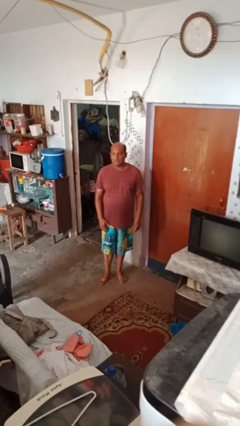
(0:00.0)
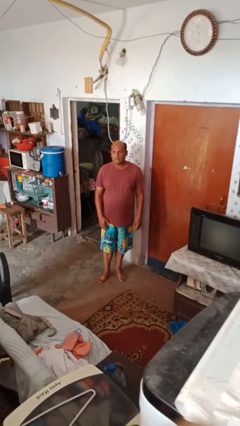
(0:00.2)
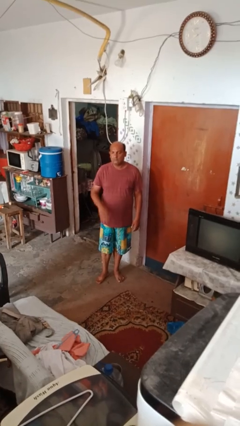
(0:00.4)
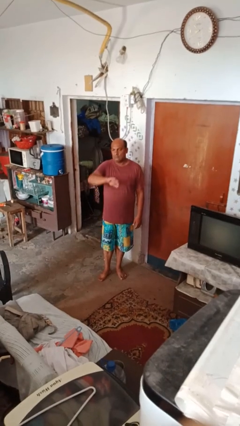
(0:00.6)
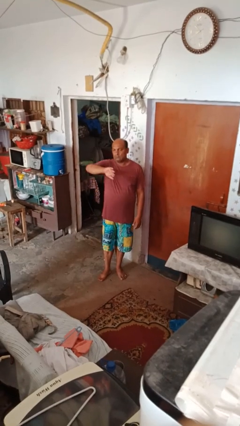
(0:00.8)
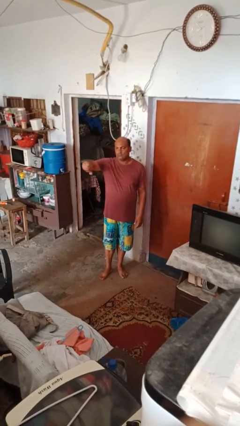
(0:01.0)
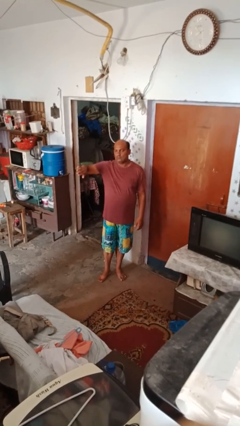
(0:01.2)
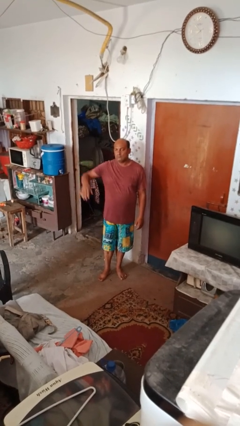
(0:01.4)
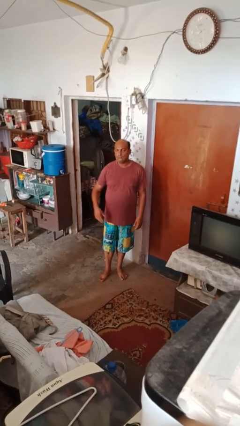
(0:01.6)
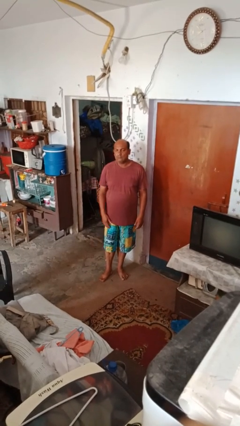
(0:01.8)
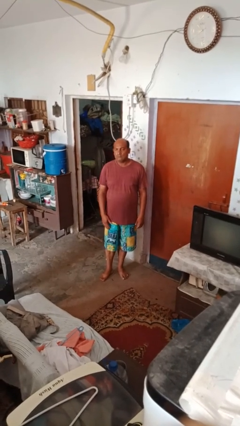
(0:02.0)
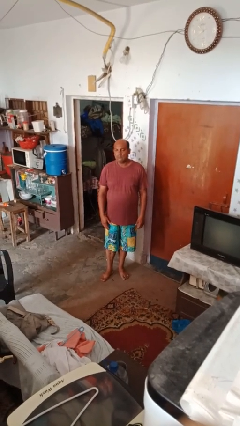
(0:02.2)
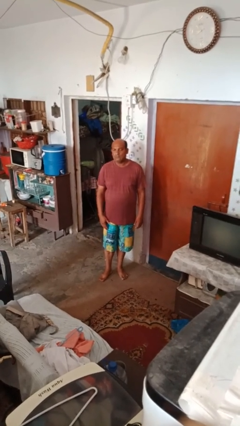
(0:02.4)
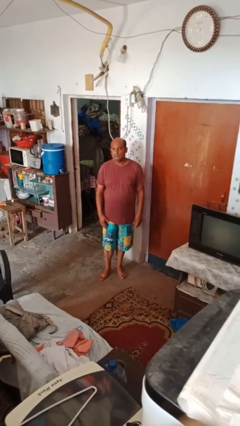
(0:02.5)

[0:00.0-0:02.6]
person gestures swipe left

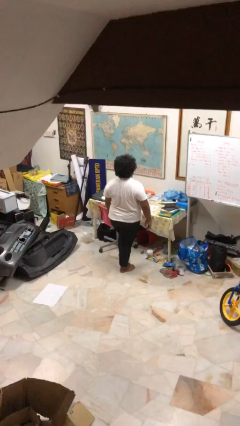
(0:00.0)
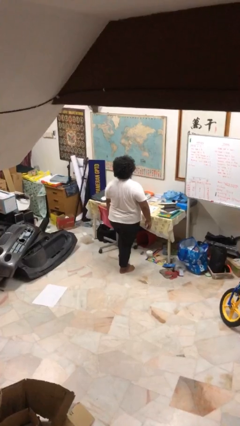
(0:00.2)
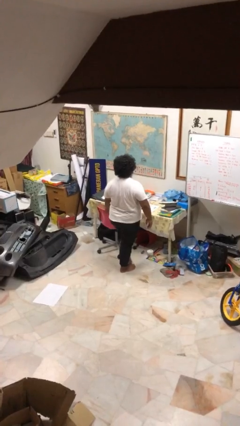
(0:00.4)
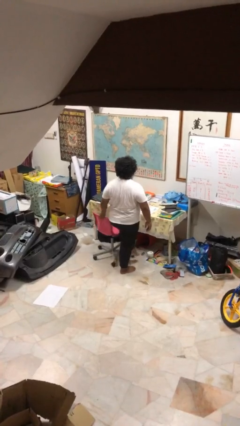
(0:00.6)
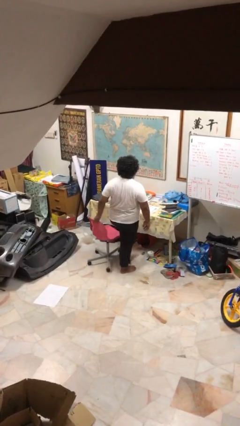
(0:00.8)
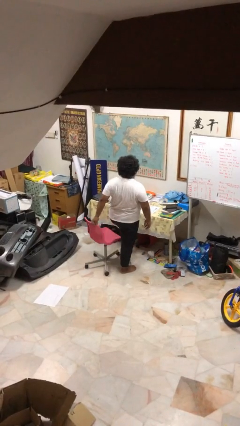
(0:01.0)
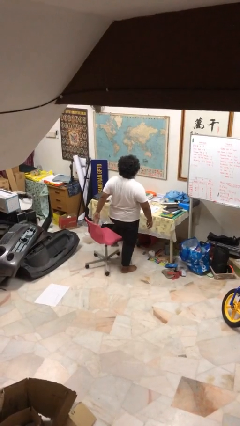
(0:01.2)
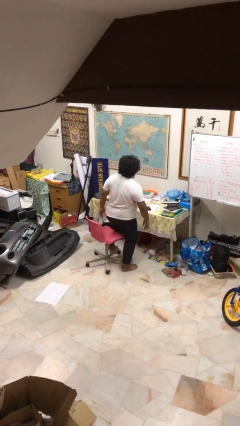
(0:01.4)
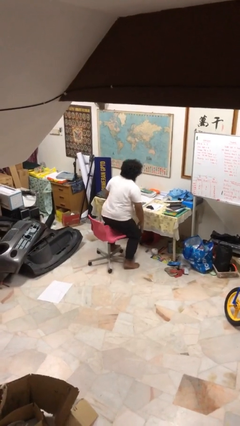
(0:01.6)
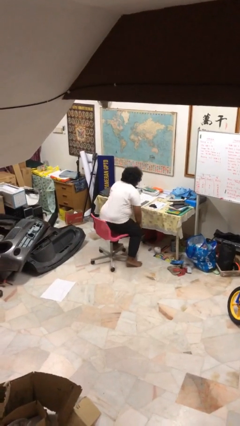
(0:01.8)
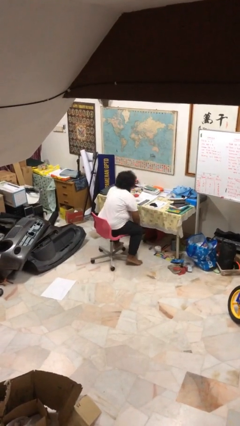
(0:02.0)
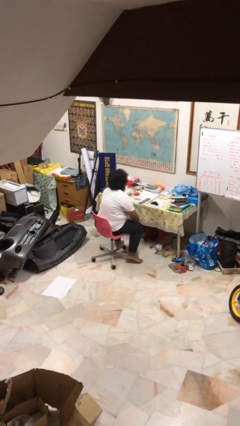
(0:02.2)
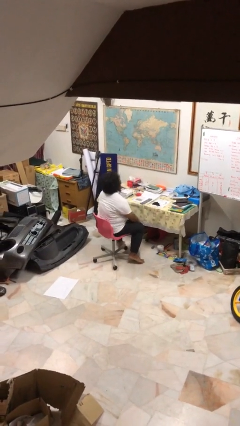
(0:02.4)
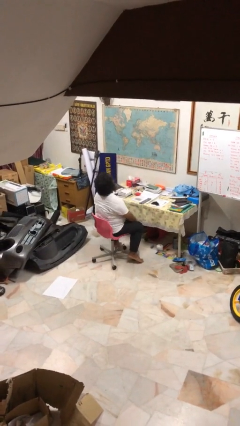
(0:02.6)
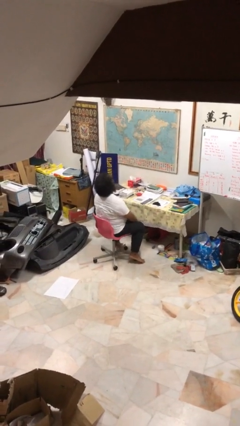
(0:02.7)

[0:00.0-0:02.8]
person sits down

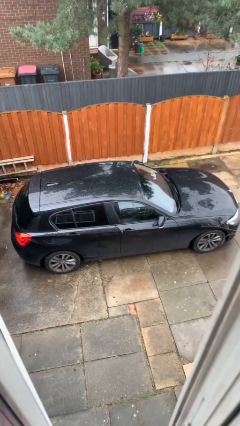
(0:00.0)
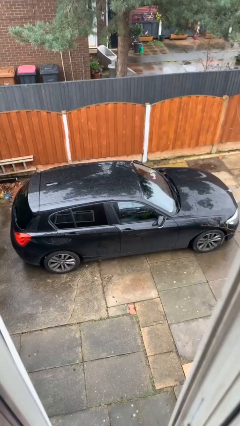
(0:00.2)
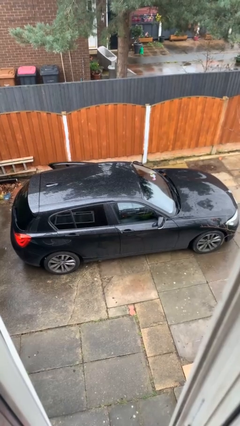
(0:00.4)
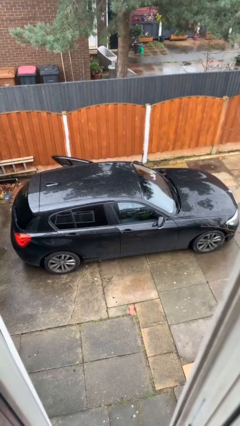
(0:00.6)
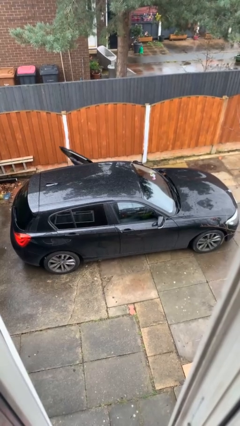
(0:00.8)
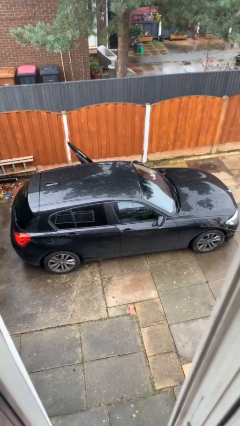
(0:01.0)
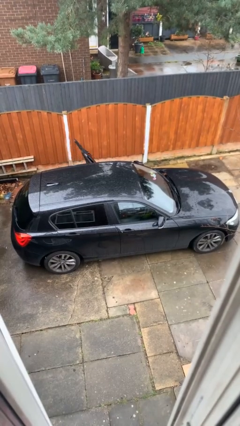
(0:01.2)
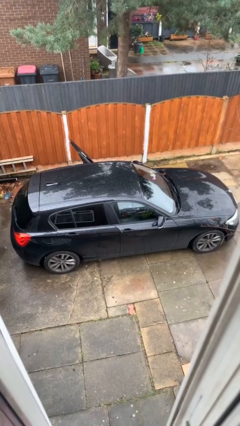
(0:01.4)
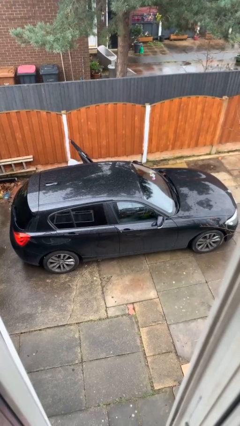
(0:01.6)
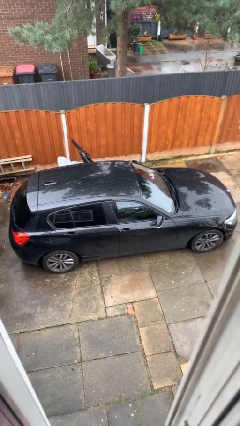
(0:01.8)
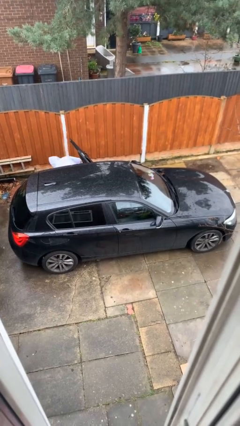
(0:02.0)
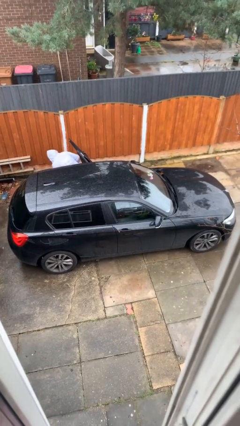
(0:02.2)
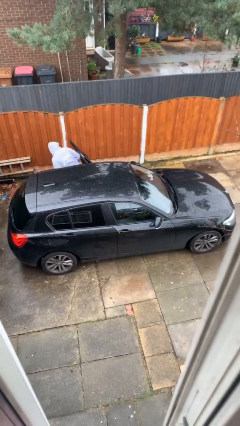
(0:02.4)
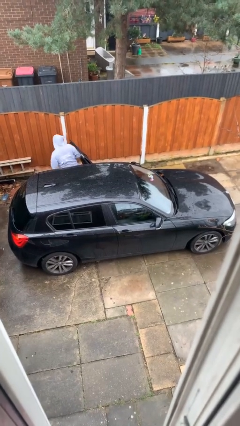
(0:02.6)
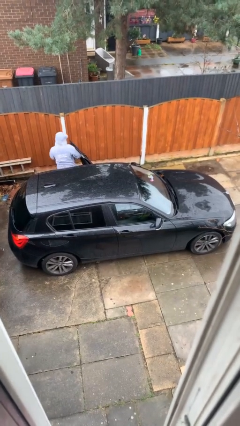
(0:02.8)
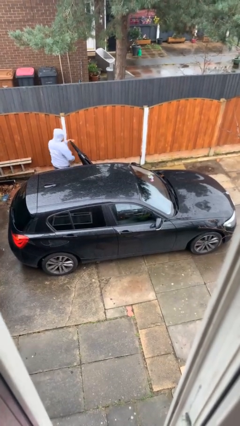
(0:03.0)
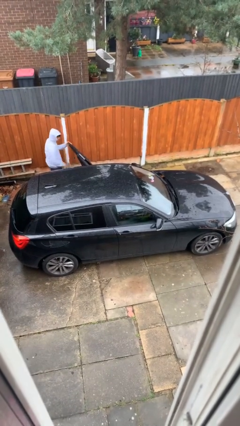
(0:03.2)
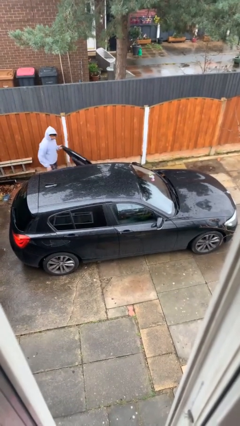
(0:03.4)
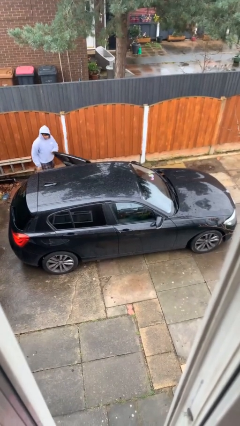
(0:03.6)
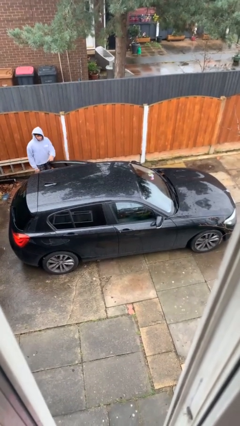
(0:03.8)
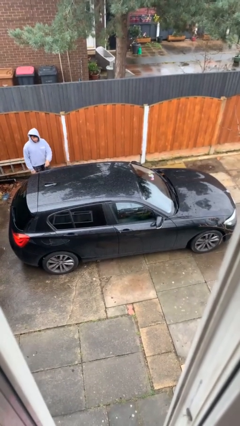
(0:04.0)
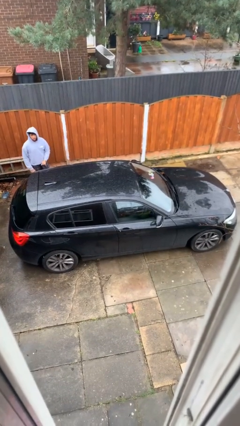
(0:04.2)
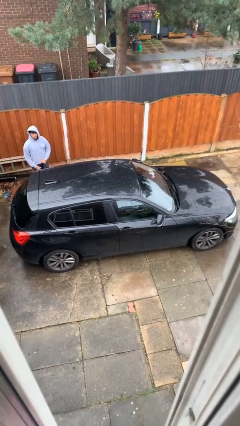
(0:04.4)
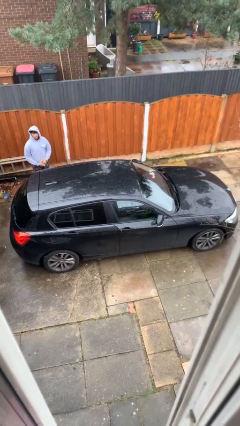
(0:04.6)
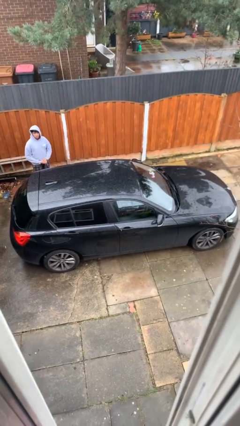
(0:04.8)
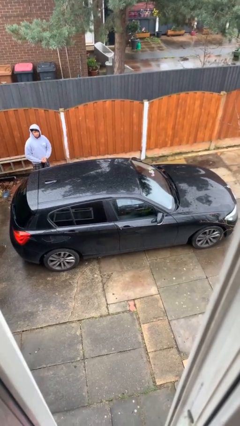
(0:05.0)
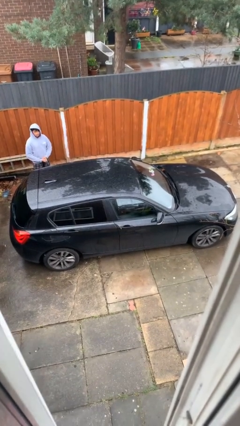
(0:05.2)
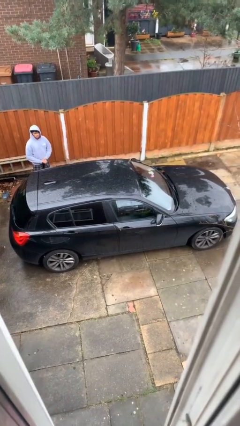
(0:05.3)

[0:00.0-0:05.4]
car drops off person

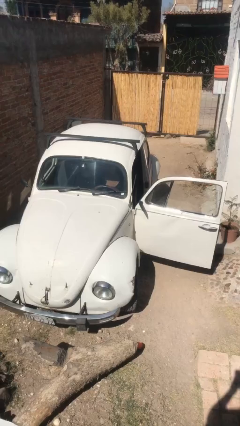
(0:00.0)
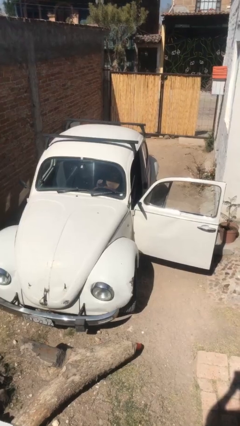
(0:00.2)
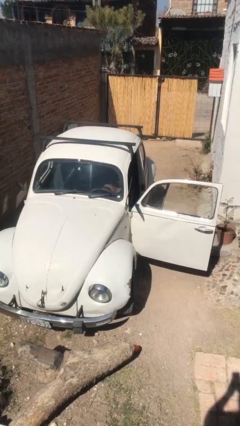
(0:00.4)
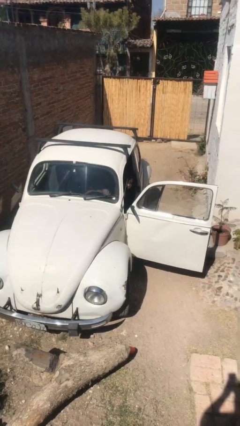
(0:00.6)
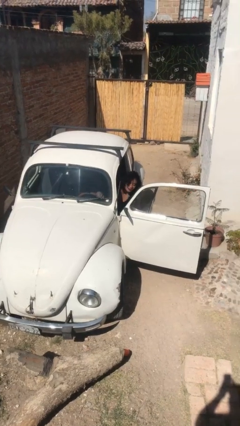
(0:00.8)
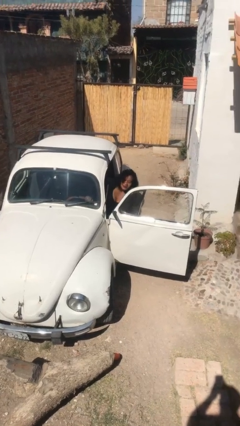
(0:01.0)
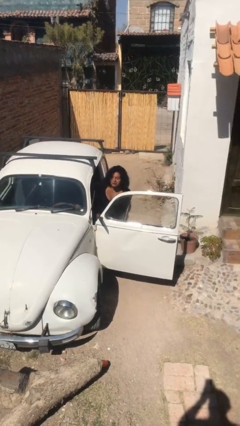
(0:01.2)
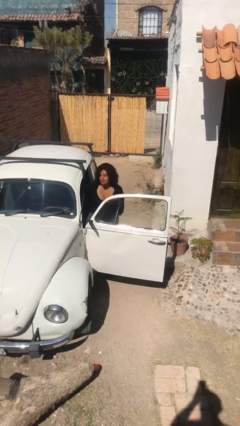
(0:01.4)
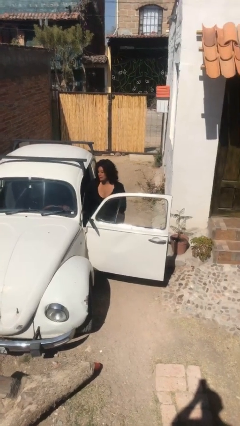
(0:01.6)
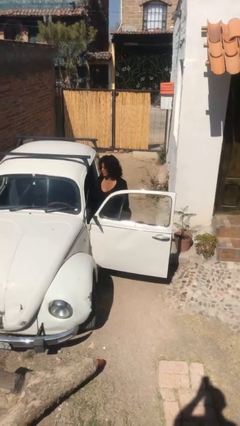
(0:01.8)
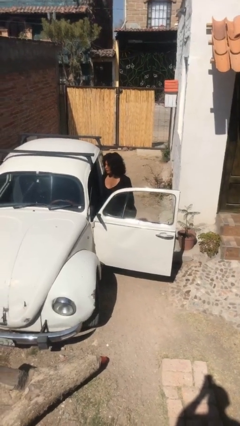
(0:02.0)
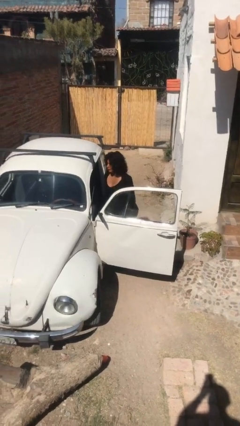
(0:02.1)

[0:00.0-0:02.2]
person exits car

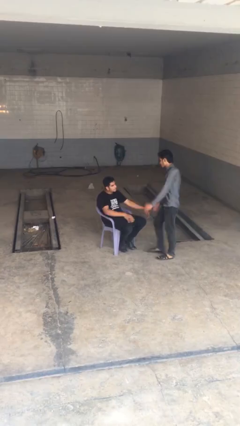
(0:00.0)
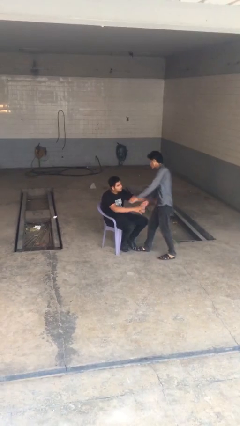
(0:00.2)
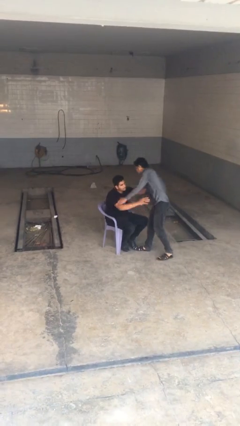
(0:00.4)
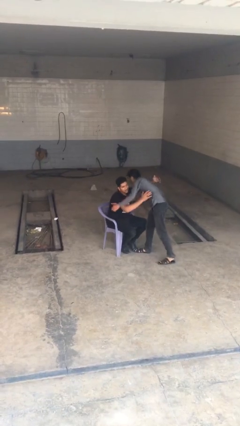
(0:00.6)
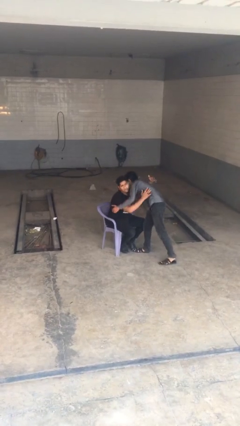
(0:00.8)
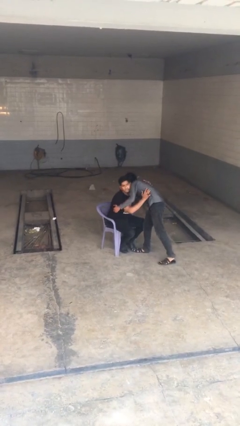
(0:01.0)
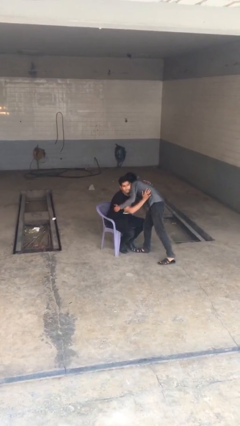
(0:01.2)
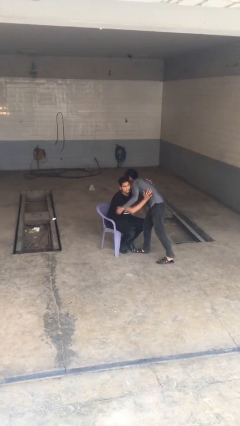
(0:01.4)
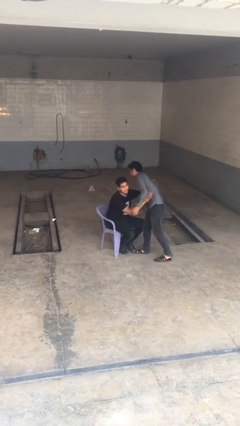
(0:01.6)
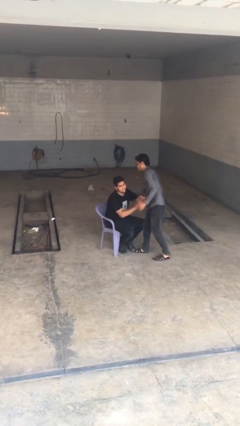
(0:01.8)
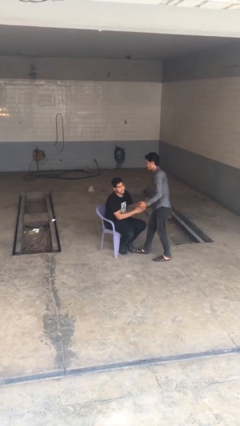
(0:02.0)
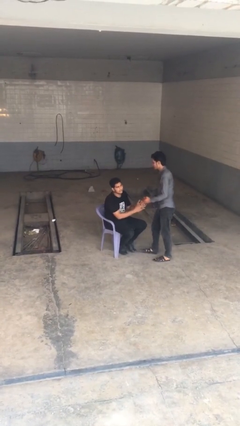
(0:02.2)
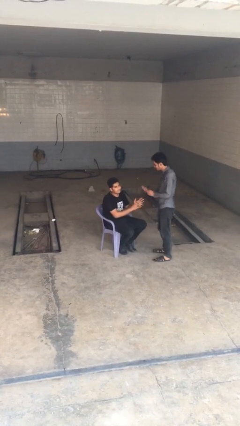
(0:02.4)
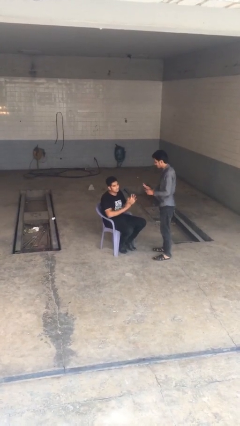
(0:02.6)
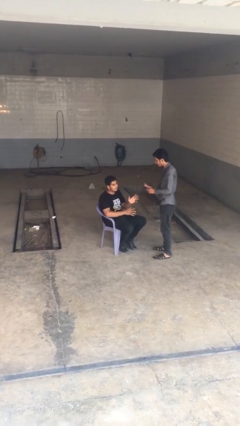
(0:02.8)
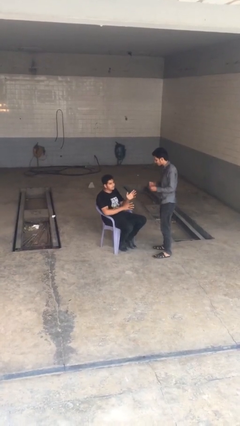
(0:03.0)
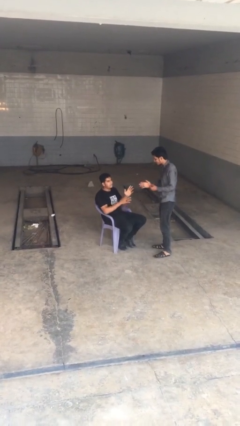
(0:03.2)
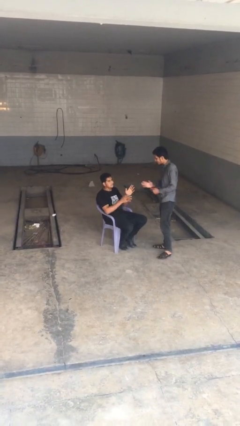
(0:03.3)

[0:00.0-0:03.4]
person embraces person

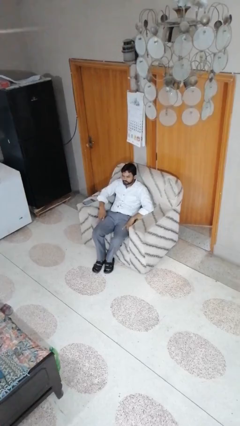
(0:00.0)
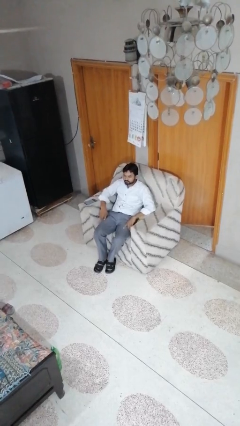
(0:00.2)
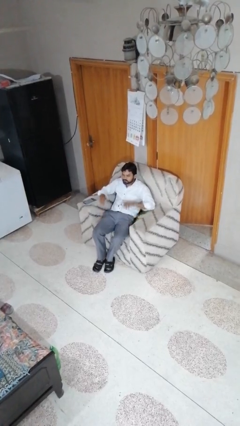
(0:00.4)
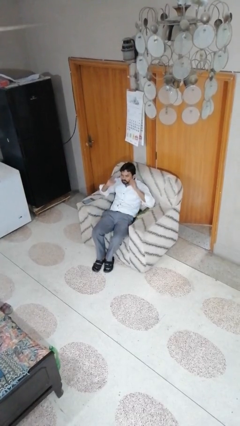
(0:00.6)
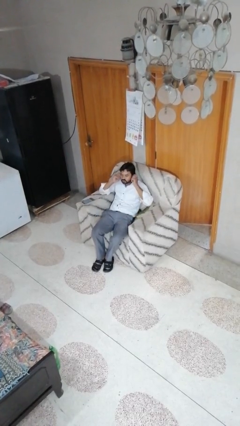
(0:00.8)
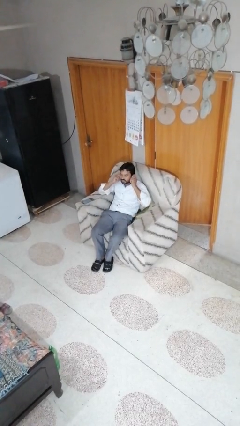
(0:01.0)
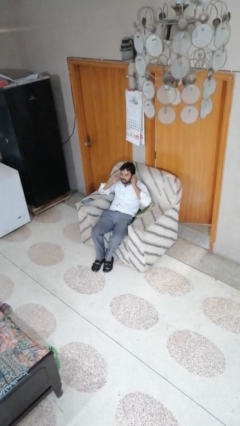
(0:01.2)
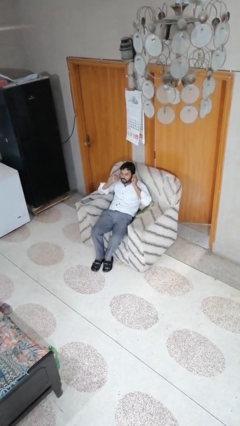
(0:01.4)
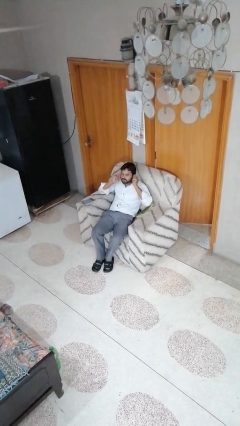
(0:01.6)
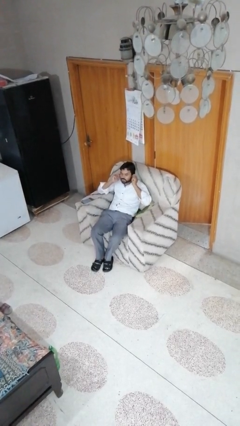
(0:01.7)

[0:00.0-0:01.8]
person puts fingers in ear
